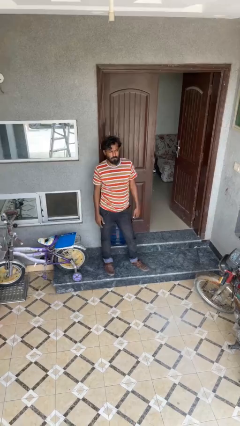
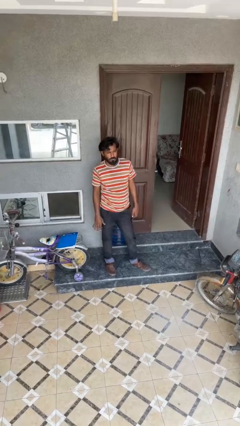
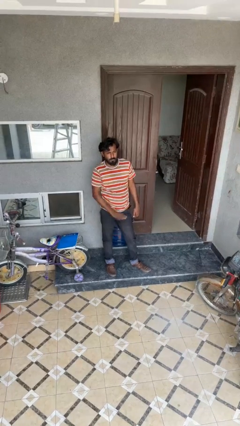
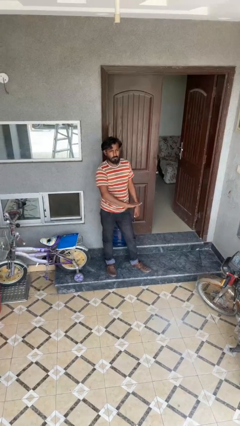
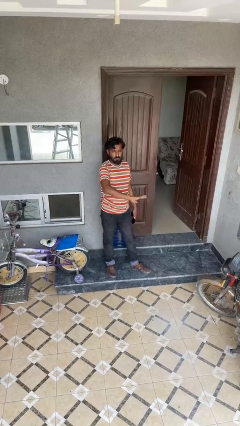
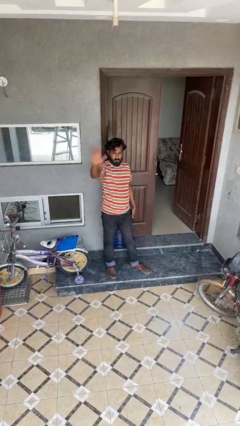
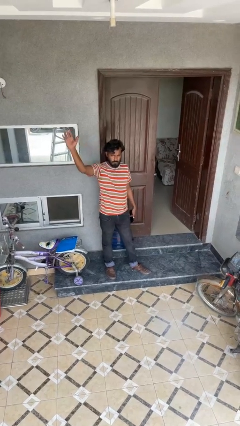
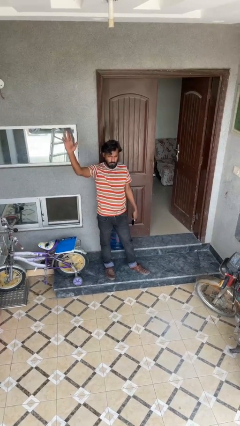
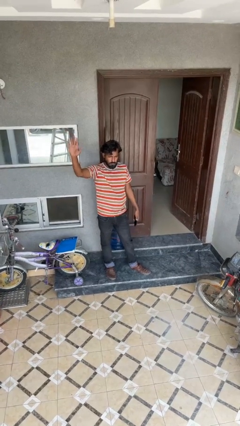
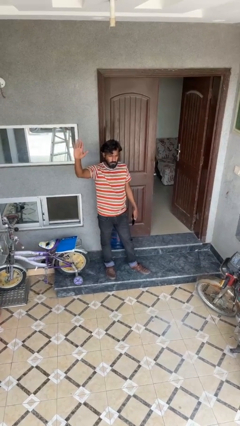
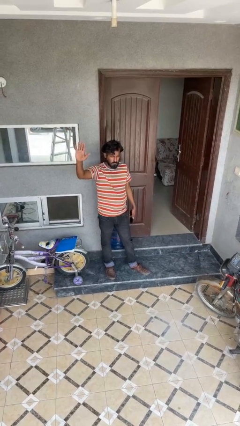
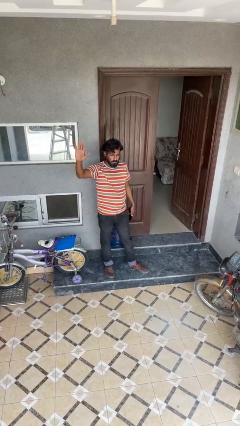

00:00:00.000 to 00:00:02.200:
person gestures swipe up

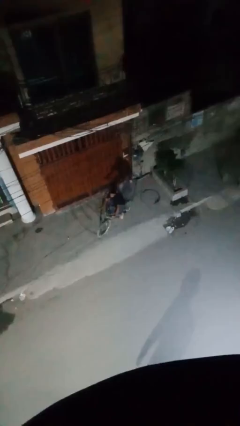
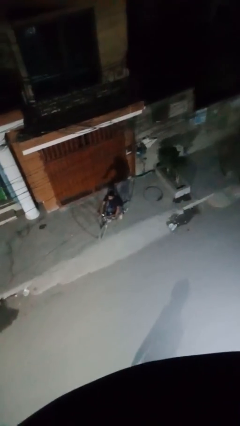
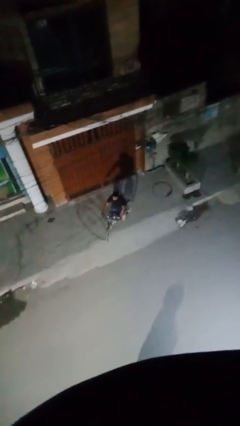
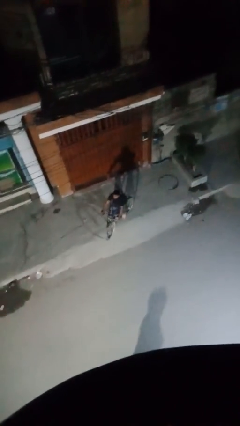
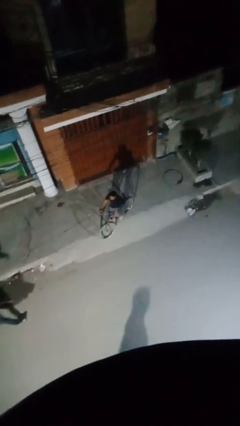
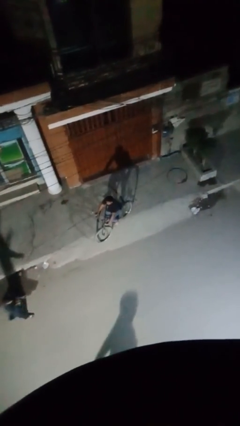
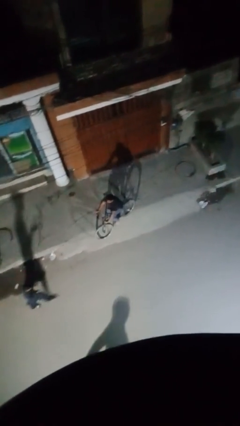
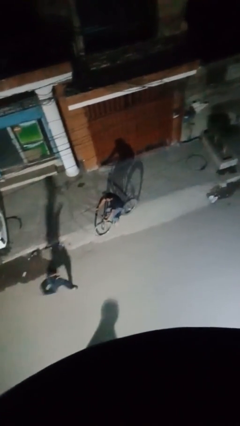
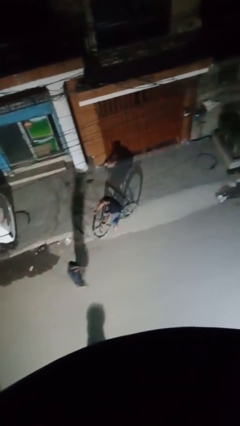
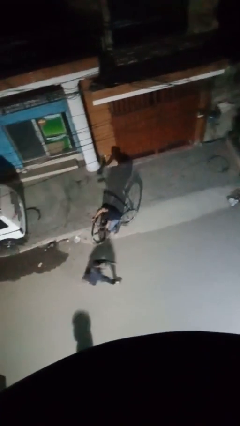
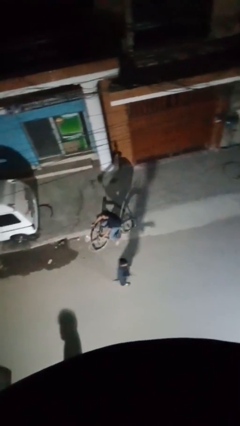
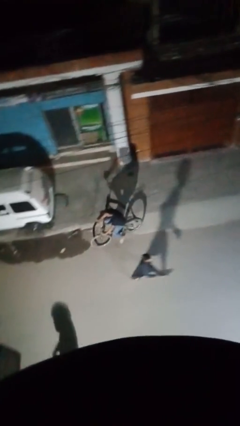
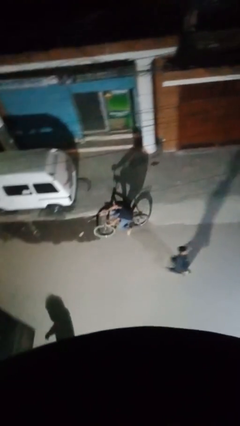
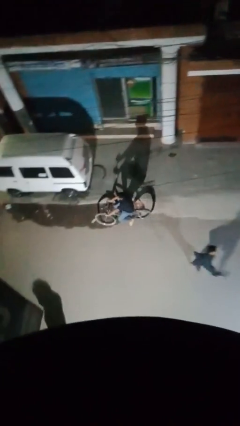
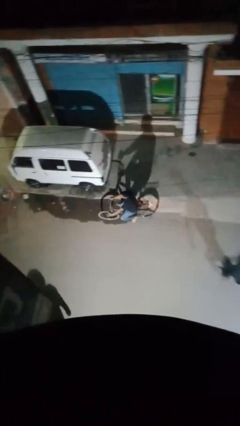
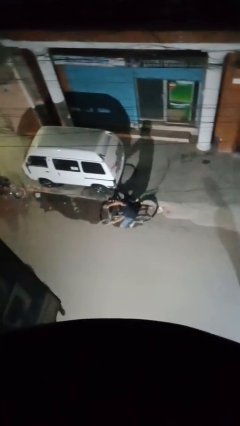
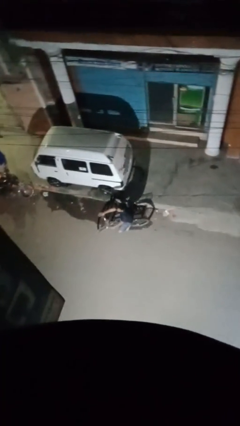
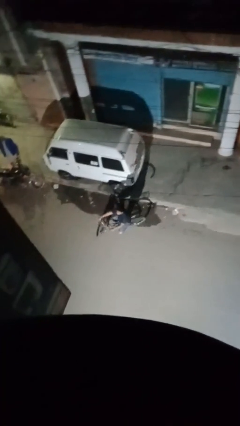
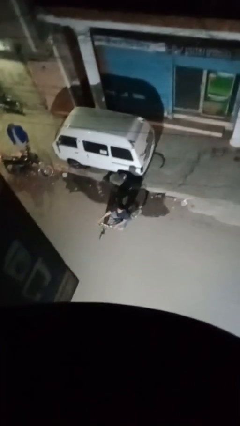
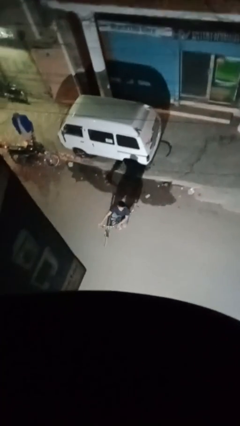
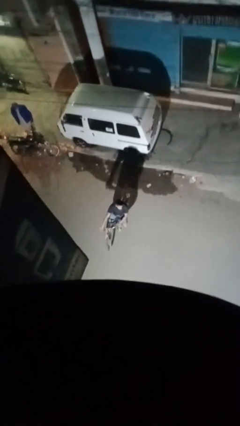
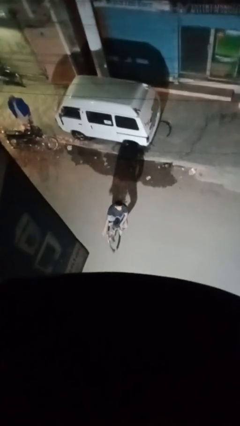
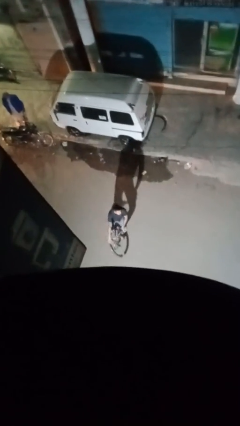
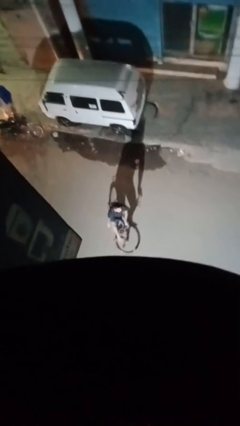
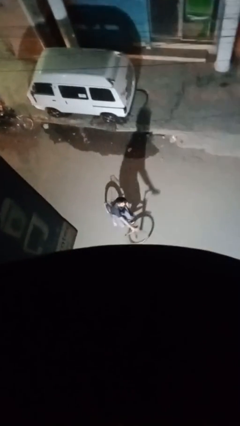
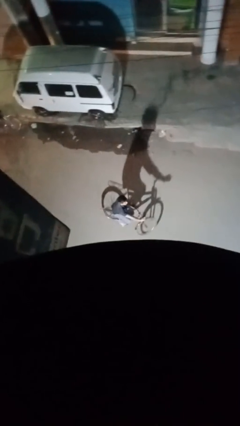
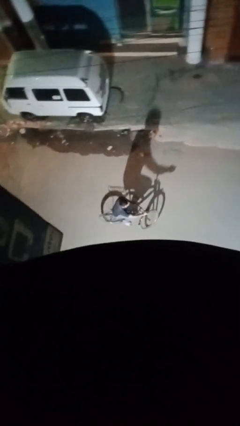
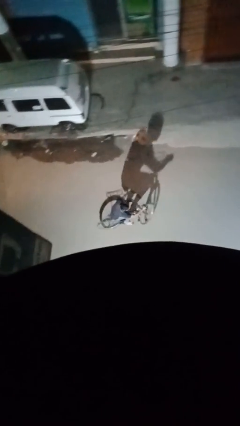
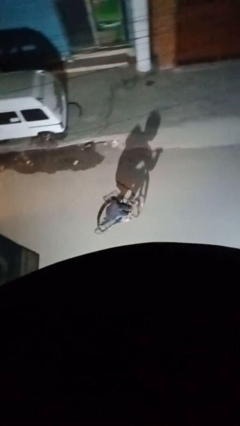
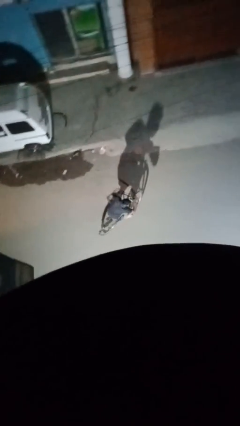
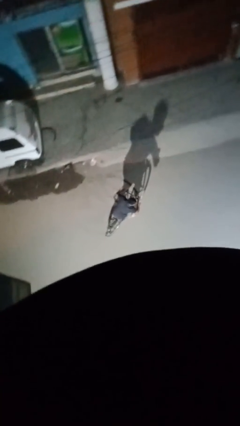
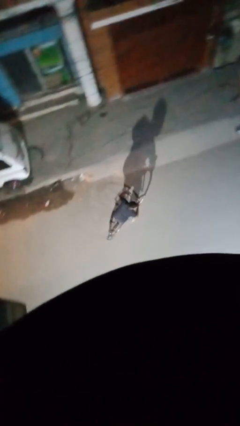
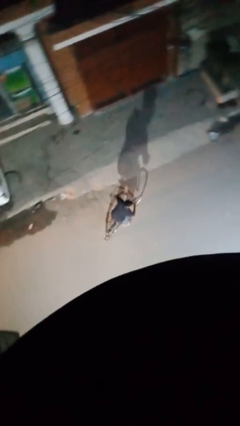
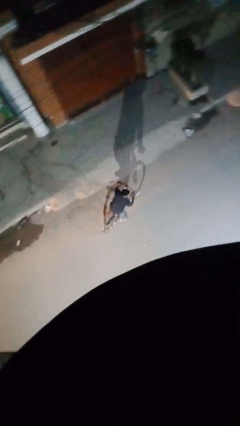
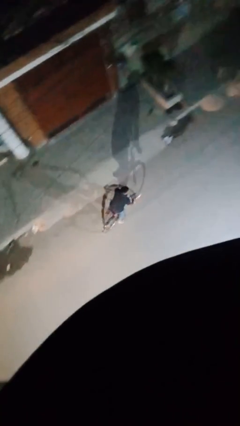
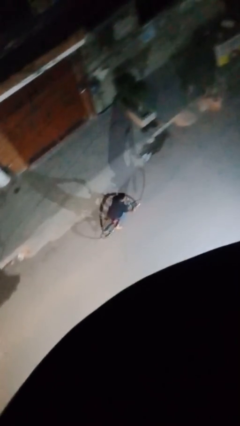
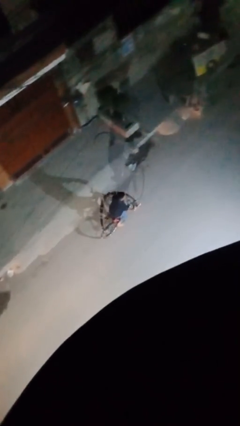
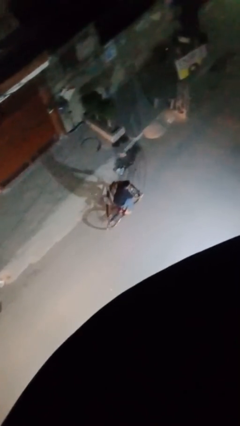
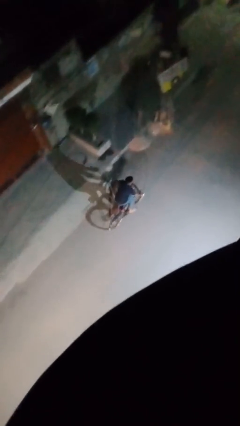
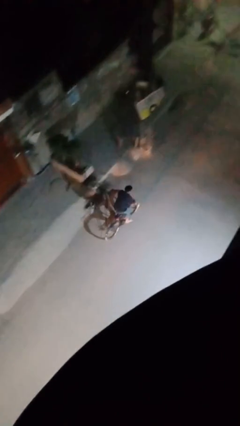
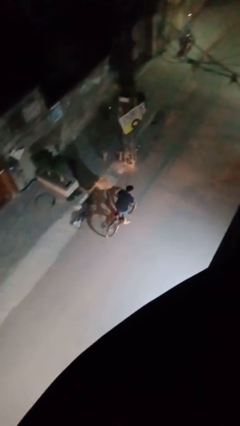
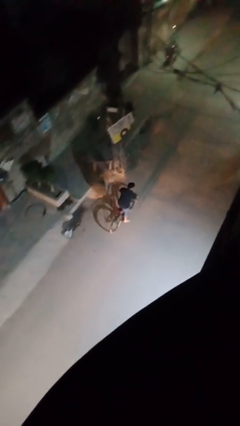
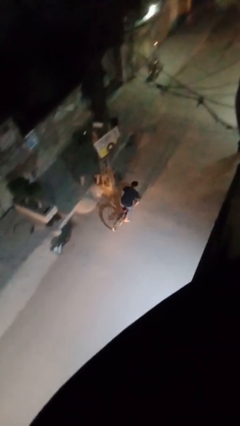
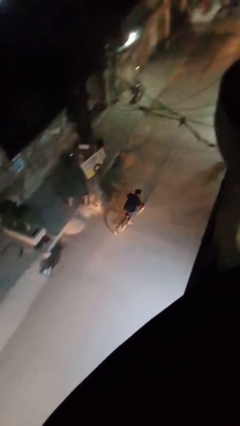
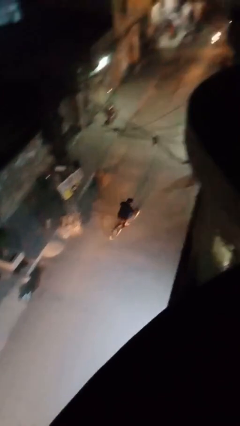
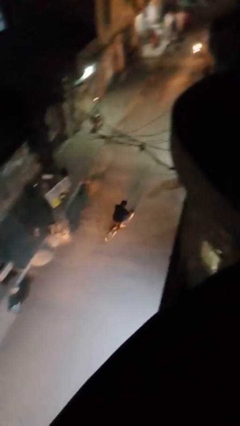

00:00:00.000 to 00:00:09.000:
person rides bicycle

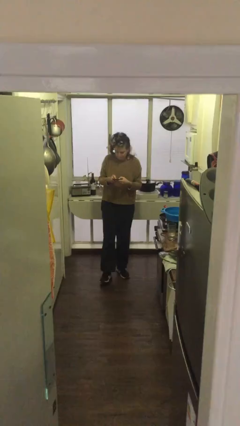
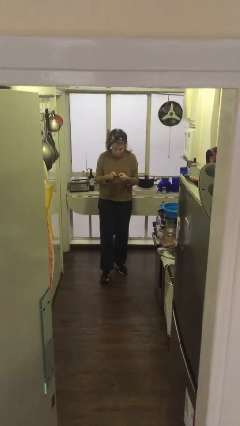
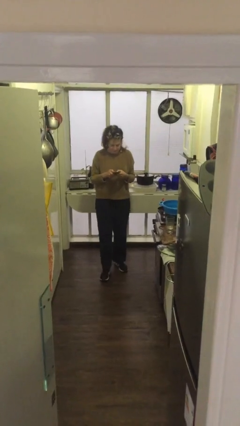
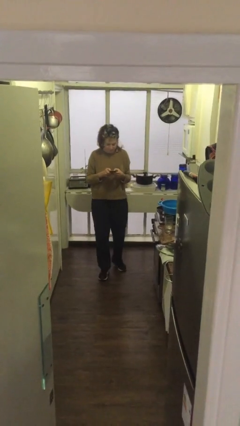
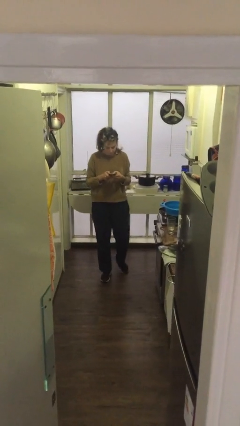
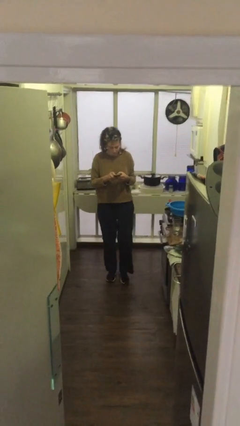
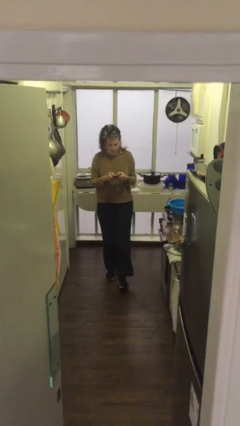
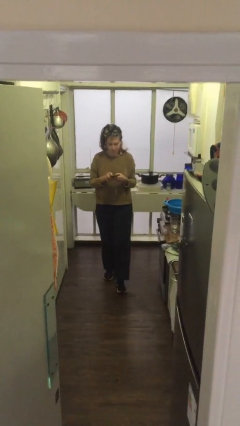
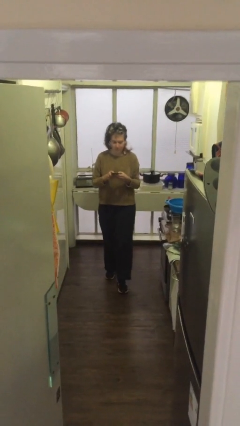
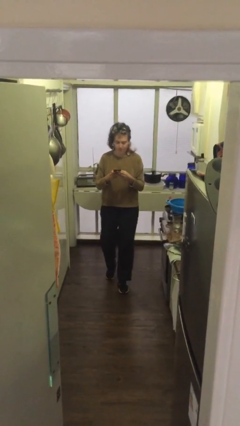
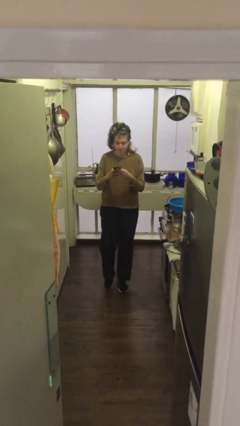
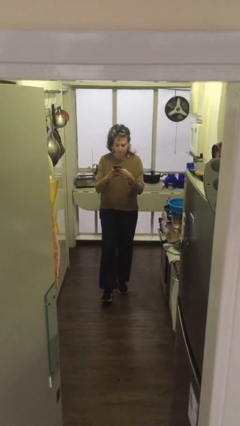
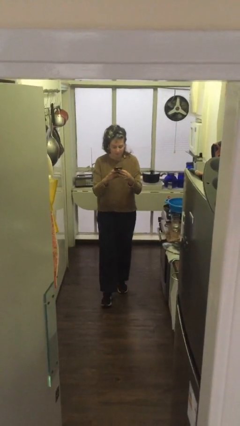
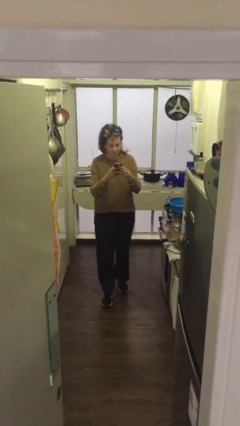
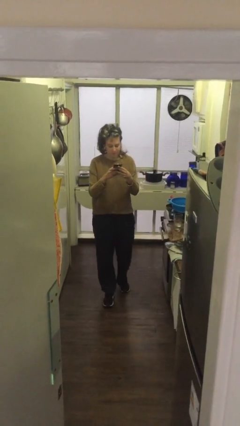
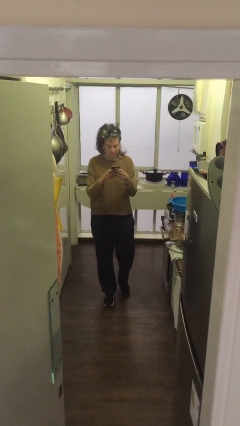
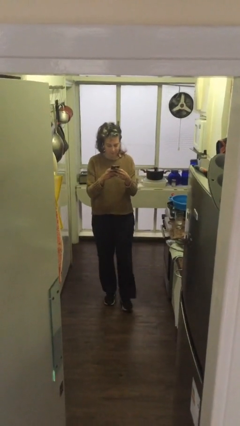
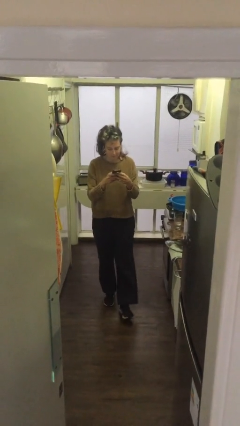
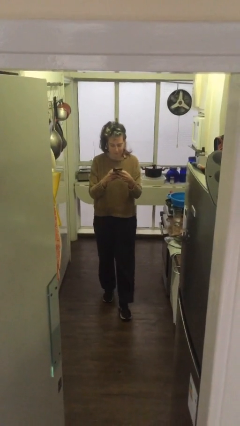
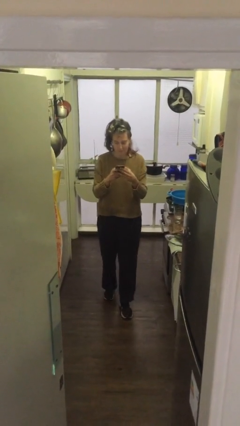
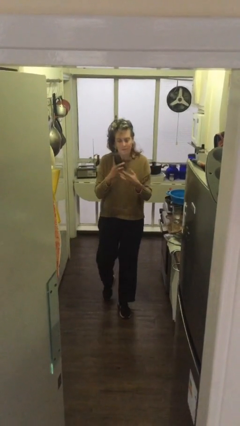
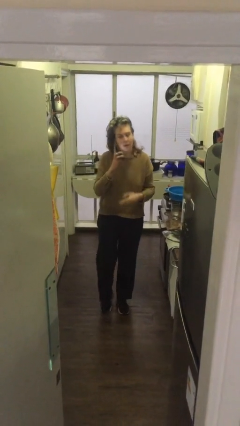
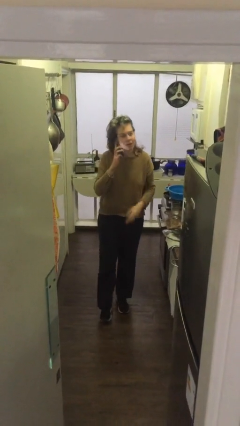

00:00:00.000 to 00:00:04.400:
person texts on phone

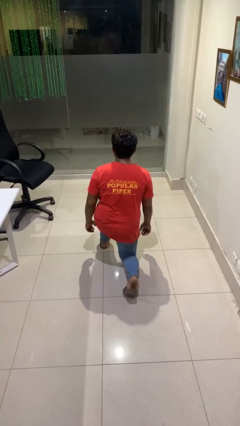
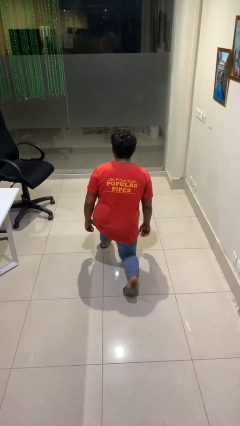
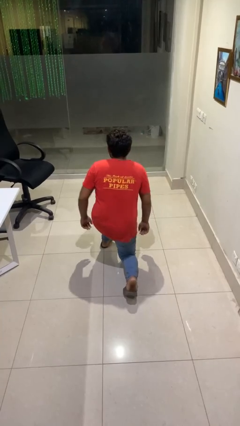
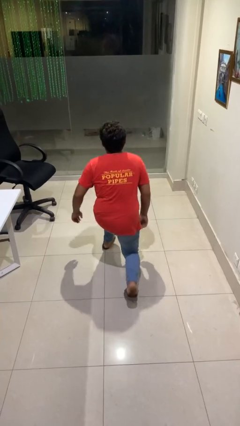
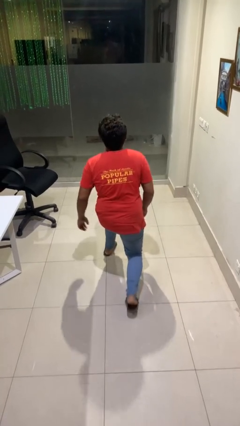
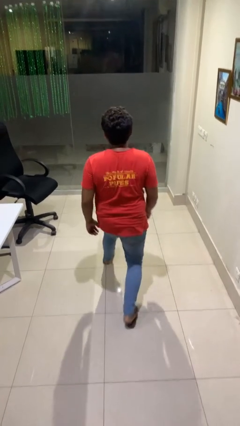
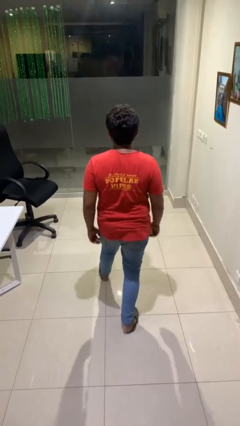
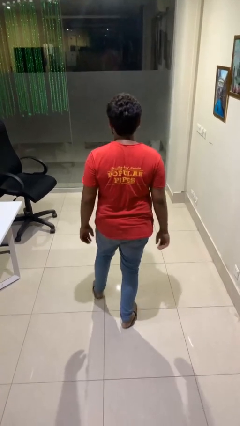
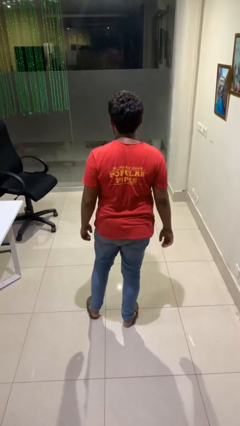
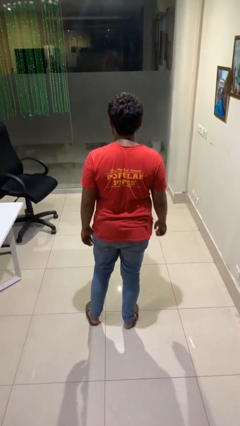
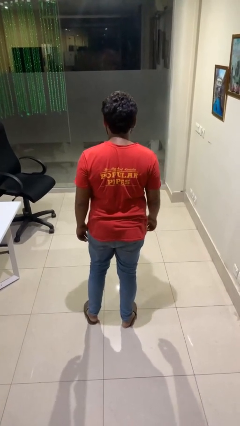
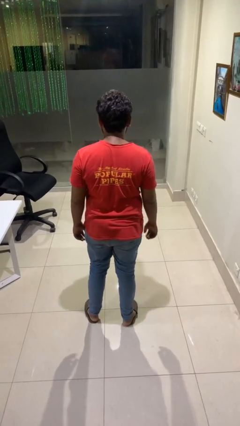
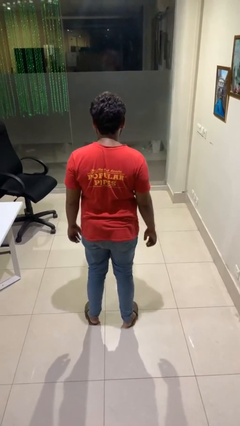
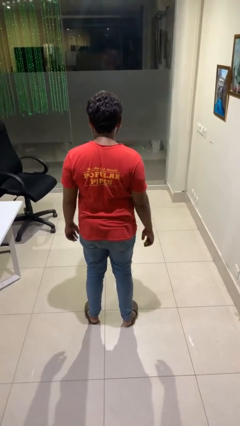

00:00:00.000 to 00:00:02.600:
person stands up from floor
